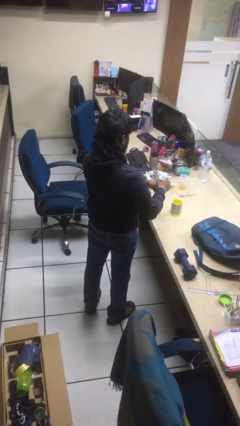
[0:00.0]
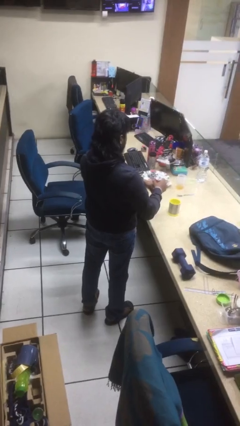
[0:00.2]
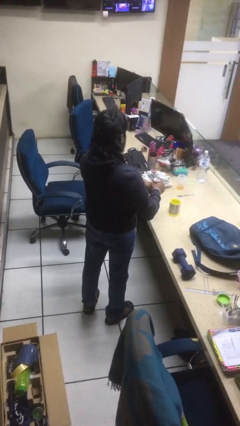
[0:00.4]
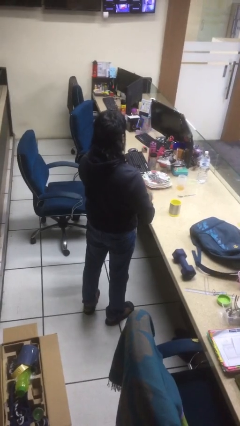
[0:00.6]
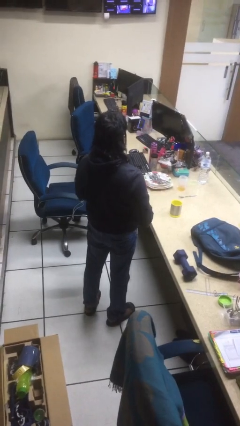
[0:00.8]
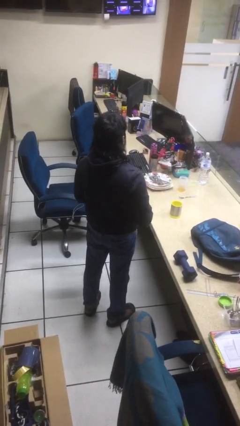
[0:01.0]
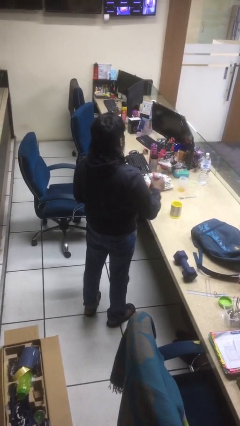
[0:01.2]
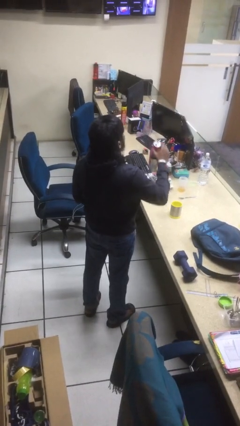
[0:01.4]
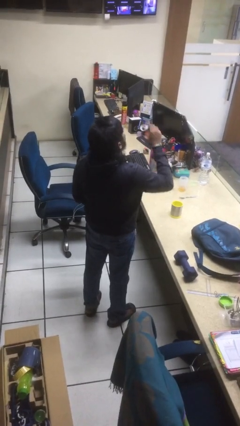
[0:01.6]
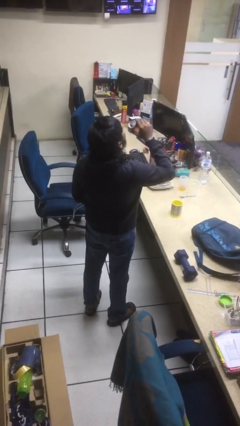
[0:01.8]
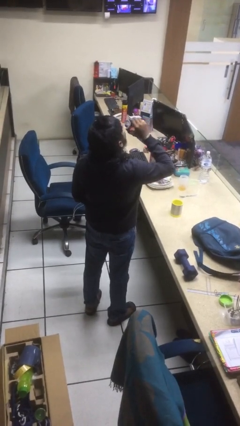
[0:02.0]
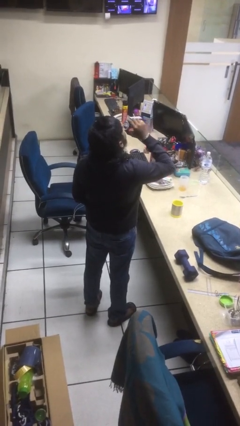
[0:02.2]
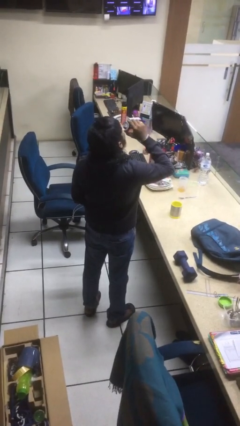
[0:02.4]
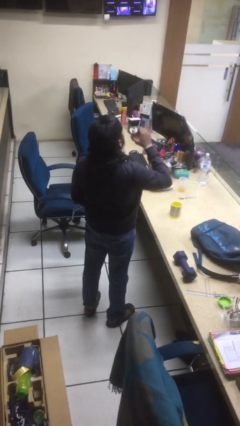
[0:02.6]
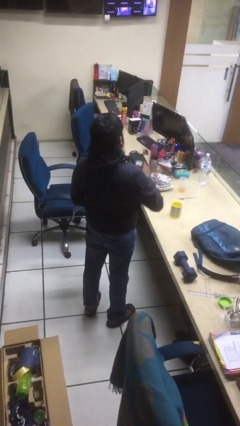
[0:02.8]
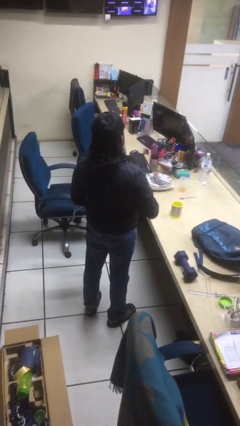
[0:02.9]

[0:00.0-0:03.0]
person drinks from beverage can

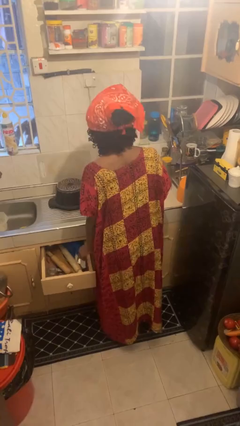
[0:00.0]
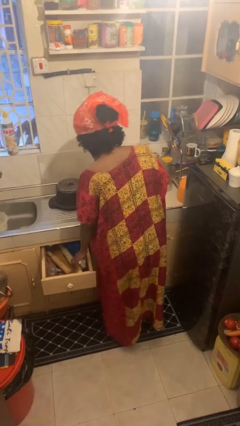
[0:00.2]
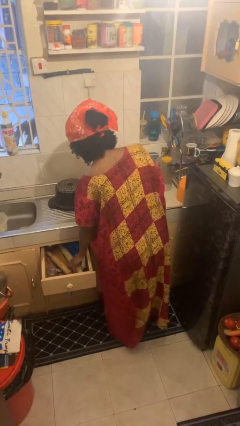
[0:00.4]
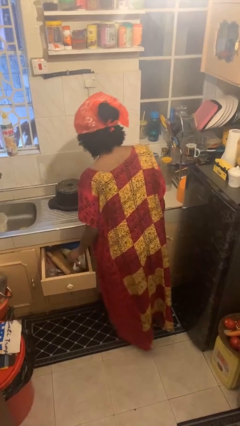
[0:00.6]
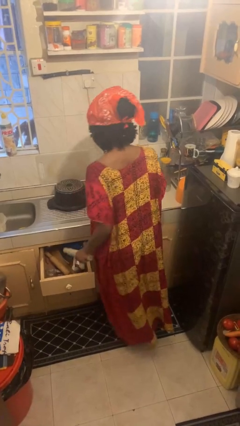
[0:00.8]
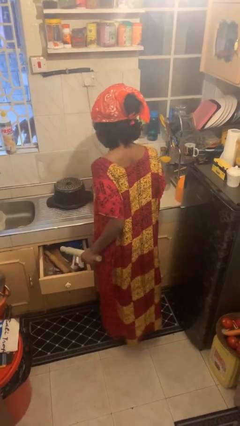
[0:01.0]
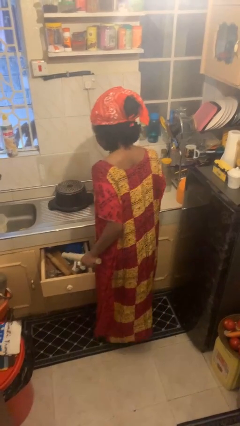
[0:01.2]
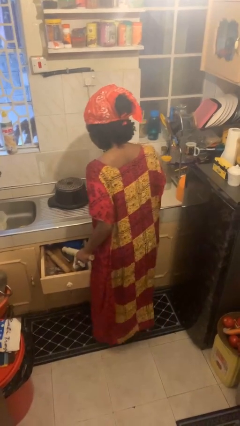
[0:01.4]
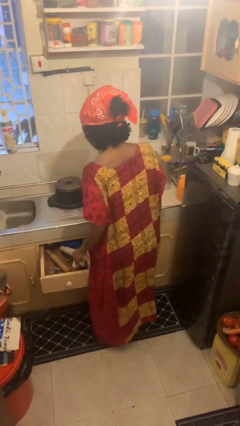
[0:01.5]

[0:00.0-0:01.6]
person takes object from kitchen drawer

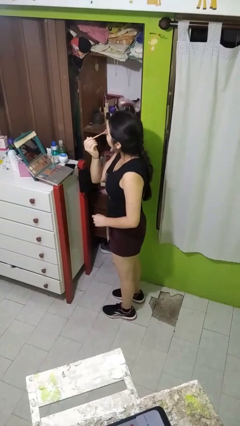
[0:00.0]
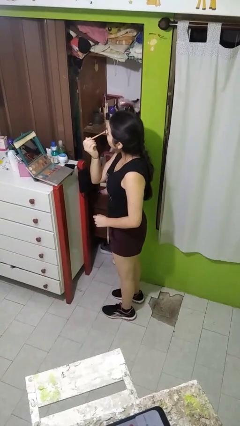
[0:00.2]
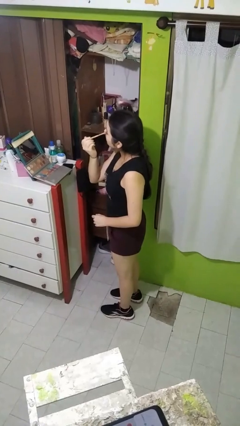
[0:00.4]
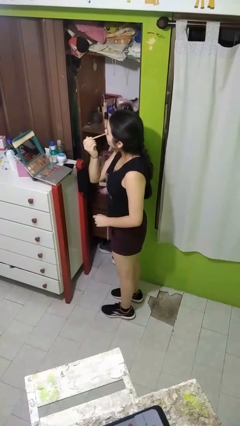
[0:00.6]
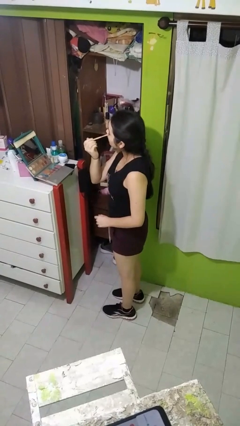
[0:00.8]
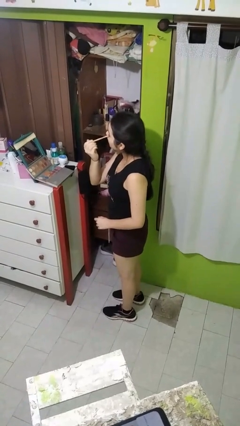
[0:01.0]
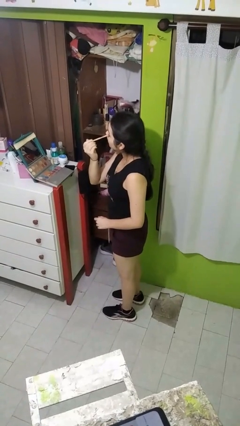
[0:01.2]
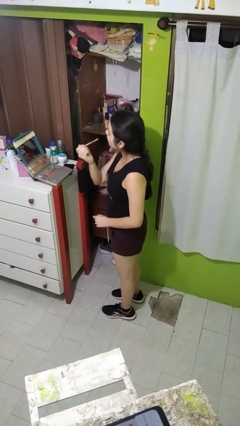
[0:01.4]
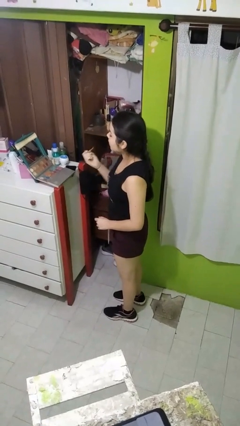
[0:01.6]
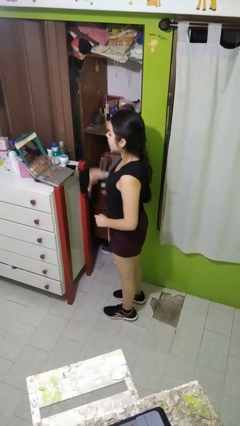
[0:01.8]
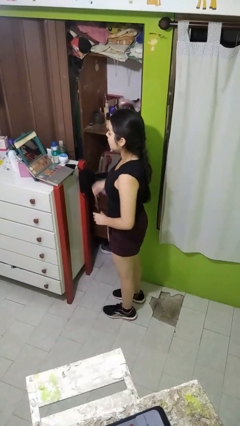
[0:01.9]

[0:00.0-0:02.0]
person applies eye makeup

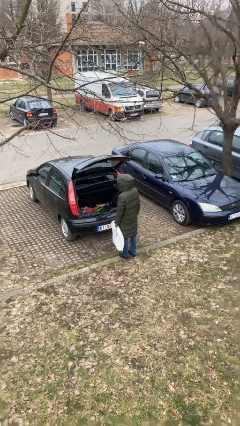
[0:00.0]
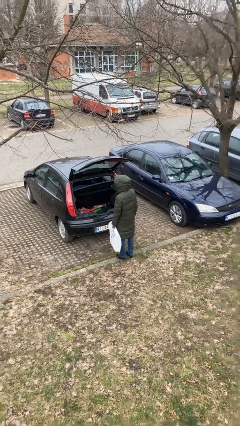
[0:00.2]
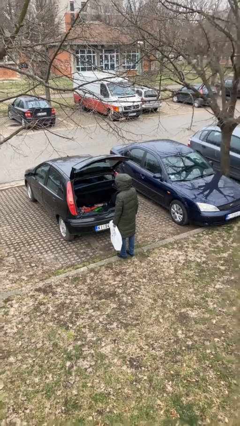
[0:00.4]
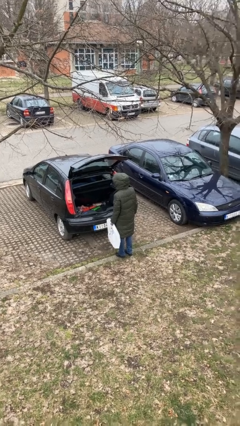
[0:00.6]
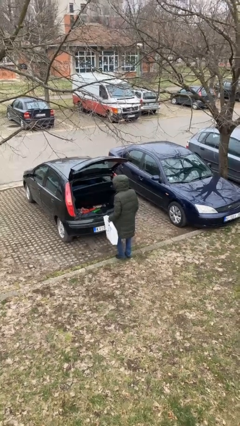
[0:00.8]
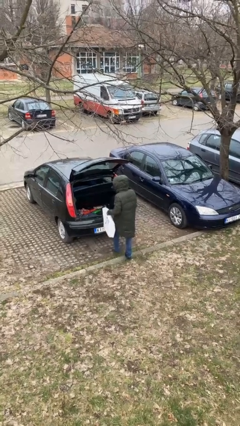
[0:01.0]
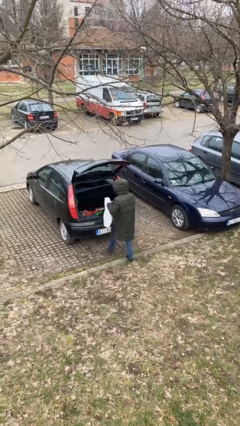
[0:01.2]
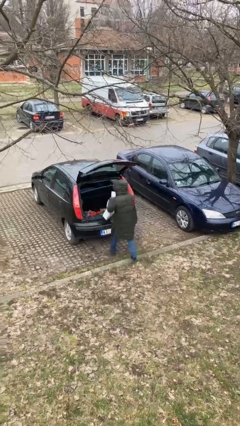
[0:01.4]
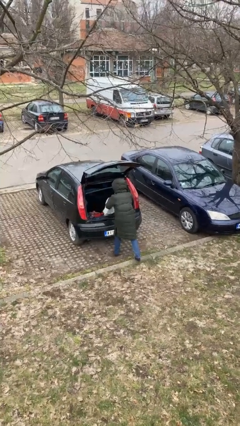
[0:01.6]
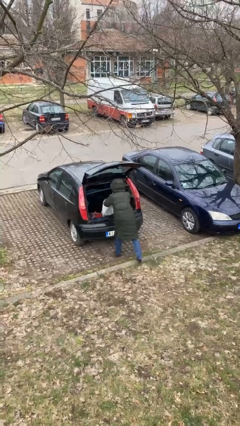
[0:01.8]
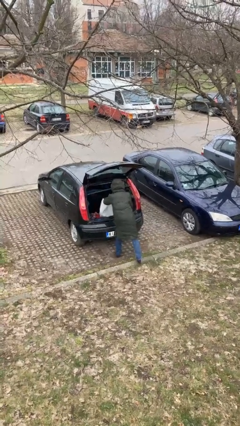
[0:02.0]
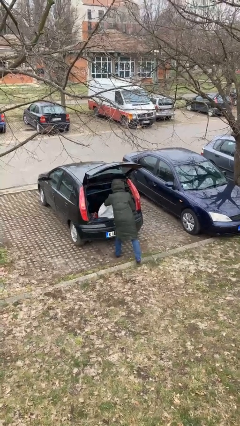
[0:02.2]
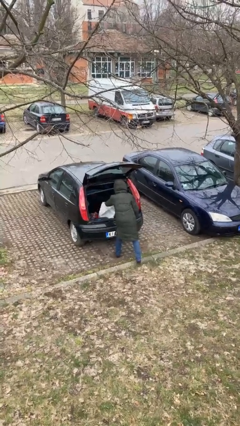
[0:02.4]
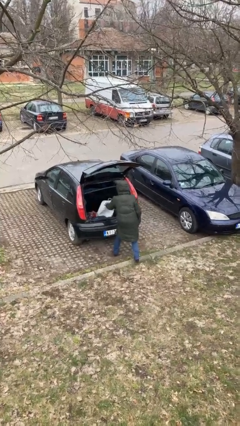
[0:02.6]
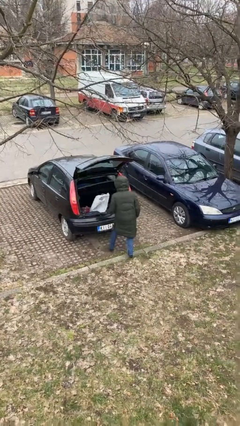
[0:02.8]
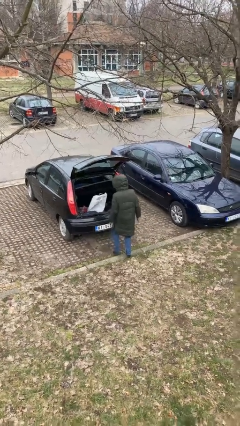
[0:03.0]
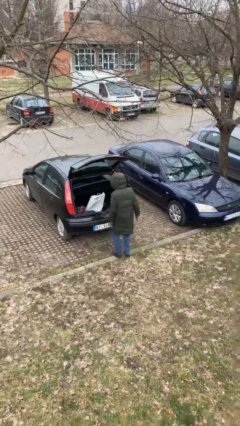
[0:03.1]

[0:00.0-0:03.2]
person loads car

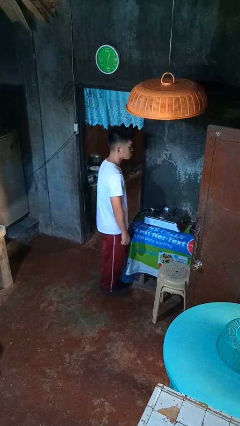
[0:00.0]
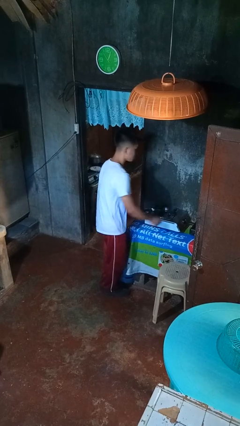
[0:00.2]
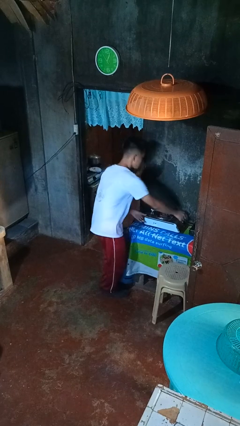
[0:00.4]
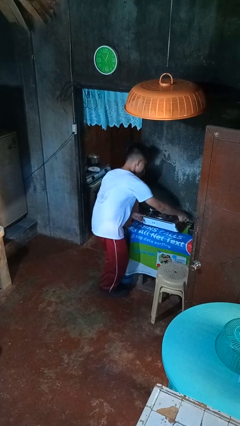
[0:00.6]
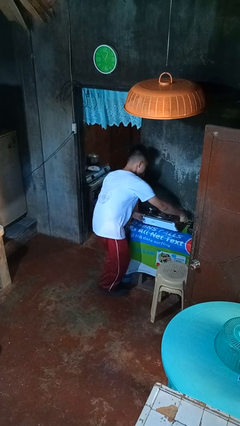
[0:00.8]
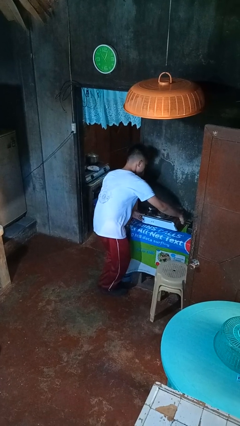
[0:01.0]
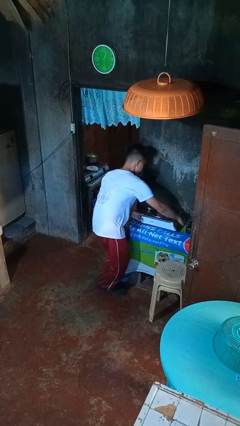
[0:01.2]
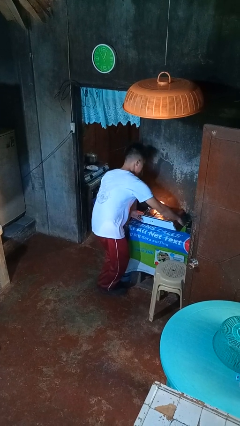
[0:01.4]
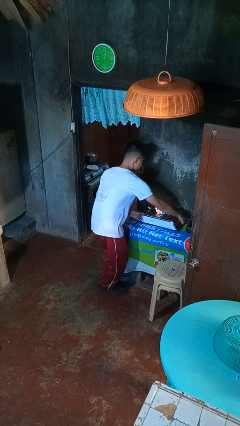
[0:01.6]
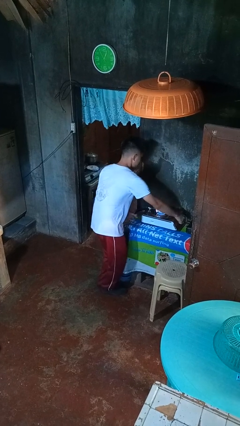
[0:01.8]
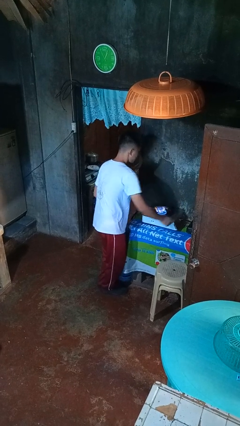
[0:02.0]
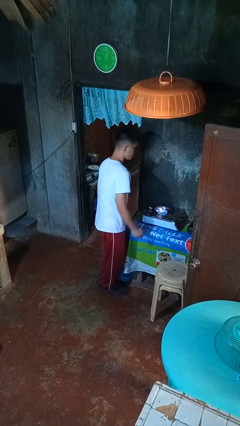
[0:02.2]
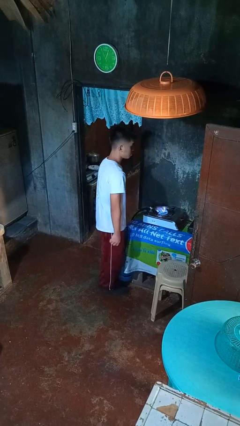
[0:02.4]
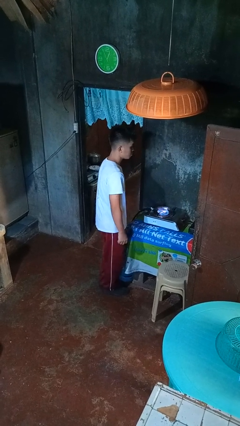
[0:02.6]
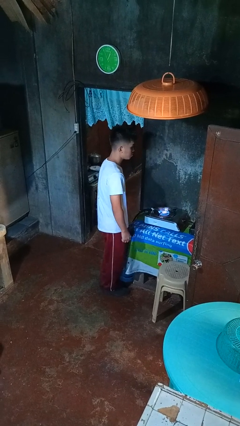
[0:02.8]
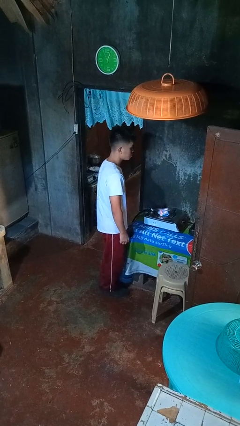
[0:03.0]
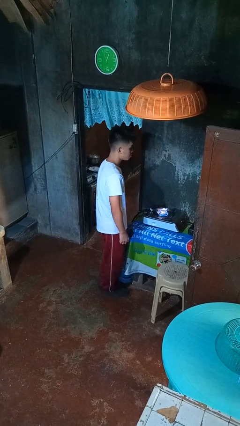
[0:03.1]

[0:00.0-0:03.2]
person turns on stovetop

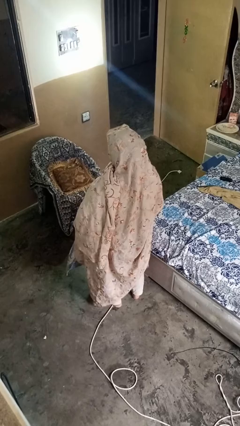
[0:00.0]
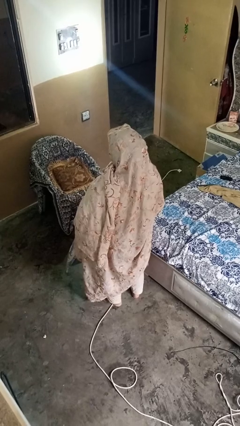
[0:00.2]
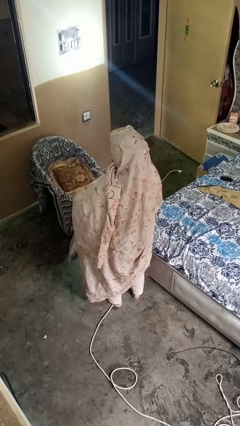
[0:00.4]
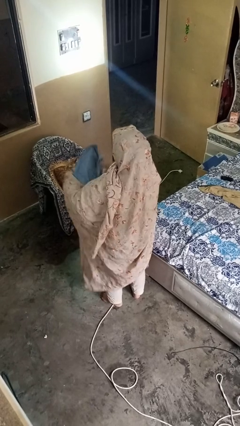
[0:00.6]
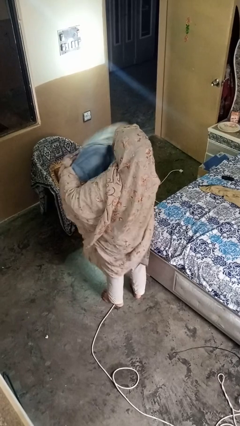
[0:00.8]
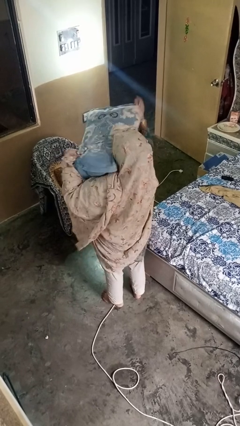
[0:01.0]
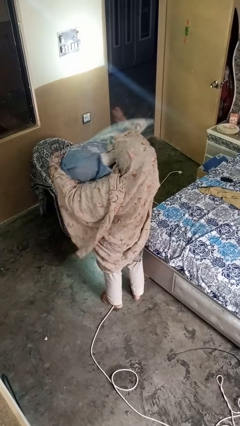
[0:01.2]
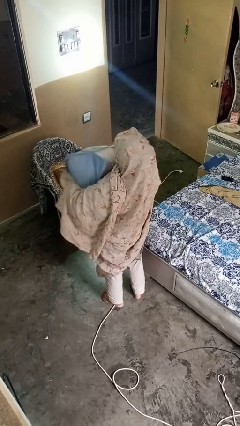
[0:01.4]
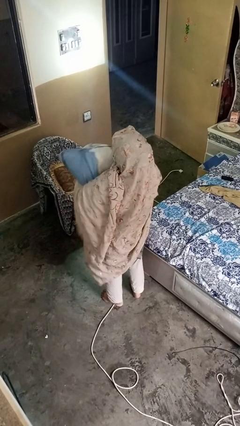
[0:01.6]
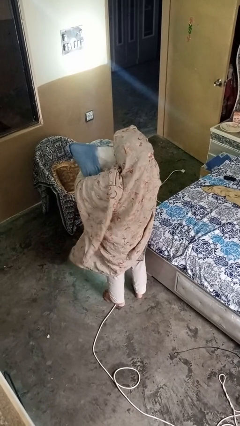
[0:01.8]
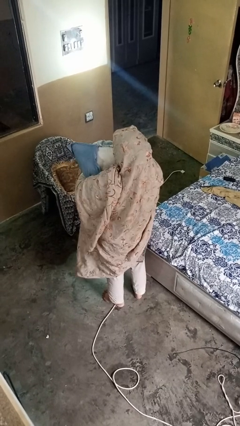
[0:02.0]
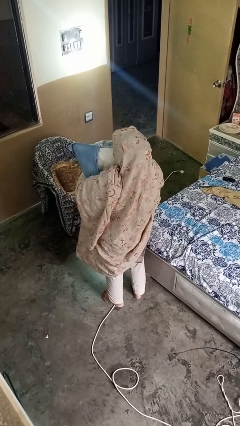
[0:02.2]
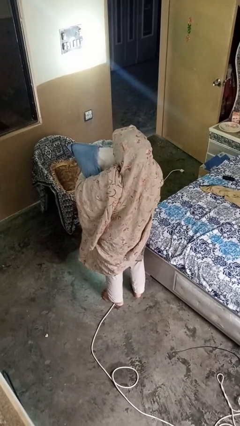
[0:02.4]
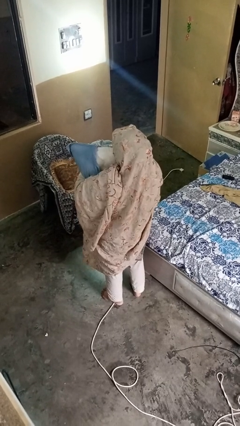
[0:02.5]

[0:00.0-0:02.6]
person squeezes object

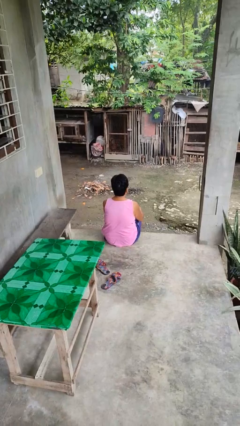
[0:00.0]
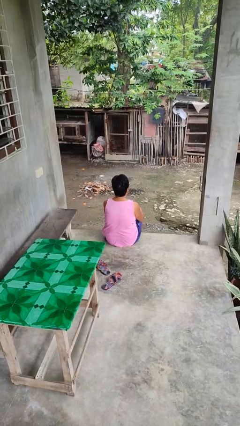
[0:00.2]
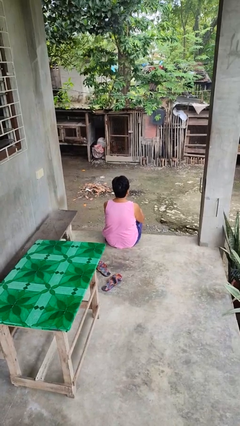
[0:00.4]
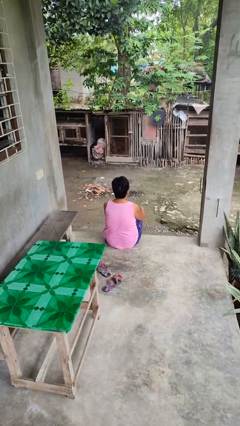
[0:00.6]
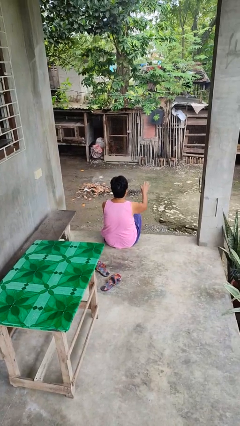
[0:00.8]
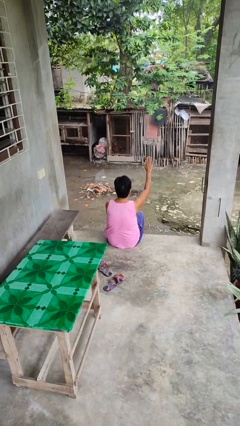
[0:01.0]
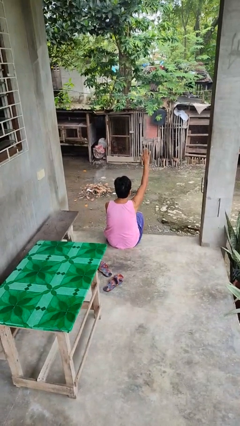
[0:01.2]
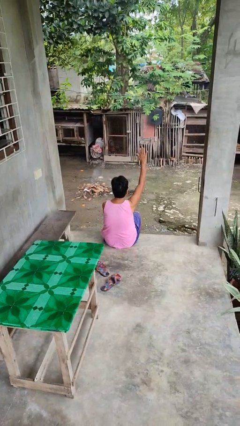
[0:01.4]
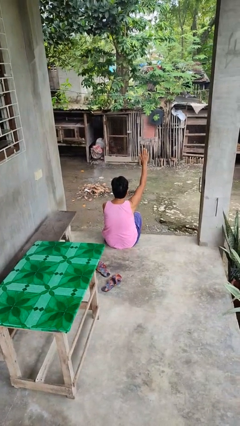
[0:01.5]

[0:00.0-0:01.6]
person gestures raise hand
